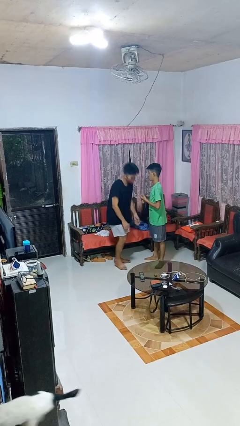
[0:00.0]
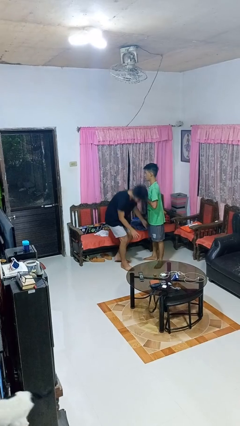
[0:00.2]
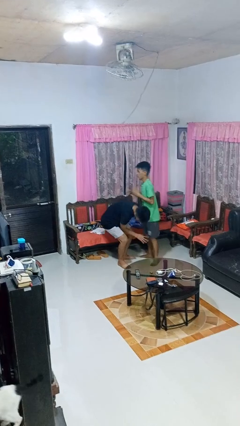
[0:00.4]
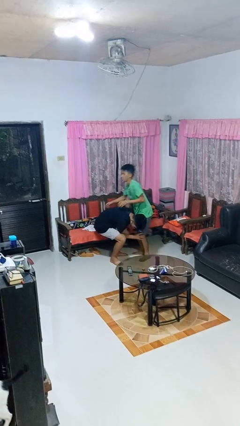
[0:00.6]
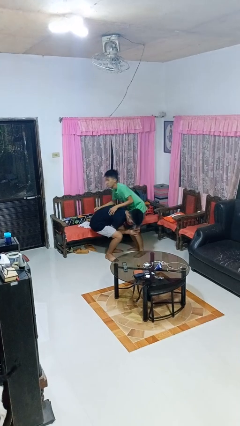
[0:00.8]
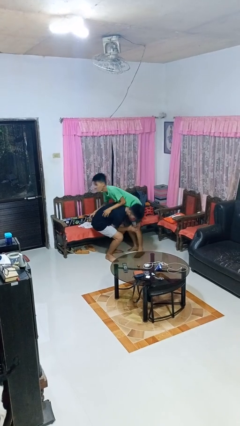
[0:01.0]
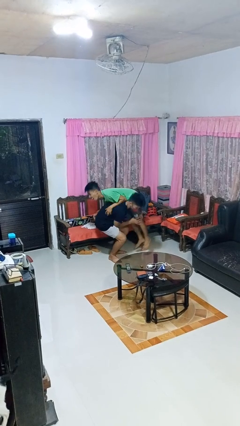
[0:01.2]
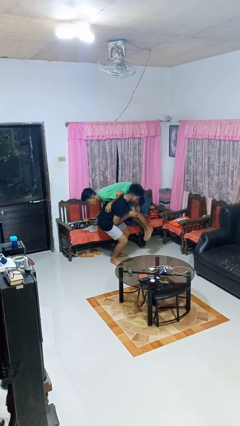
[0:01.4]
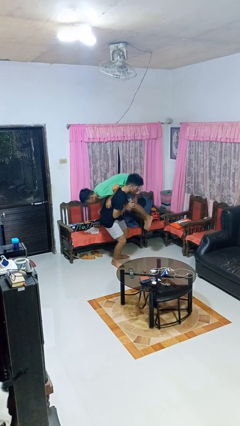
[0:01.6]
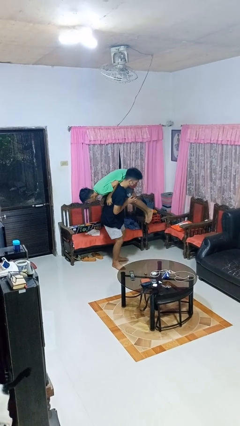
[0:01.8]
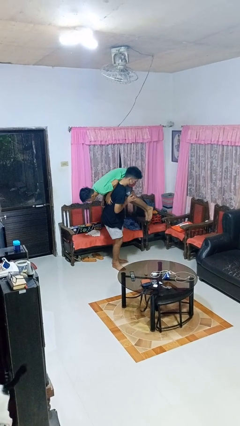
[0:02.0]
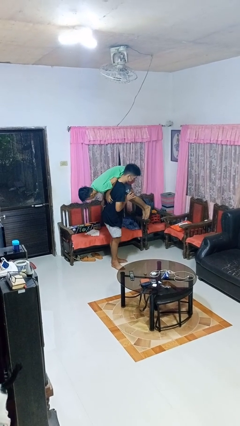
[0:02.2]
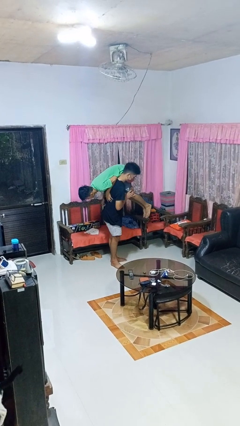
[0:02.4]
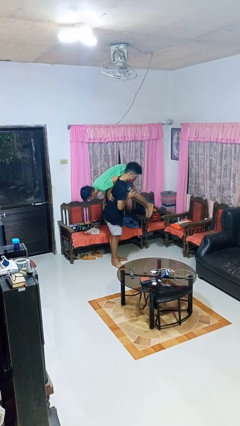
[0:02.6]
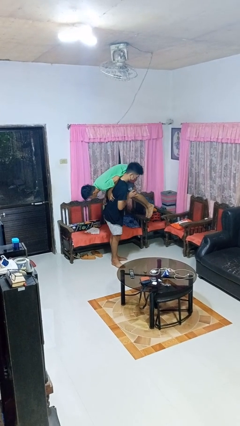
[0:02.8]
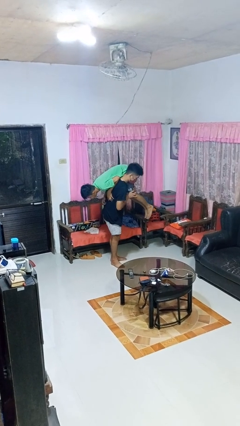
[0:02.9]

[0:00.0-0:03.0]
person carries person over shoulder

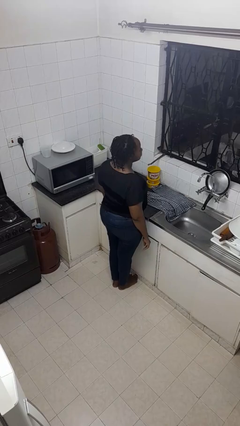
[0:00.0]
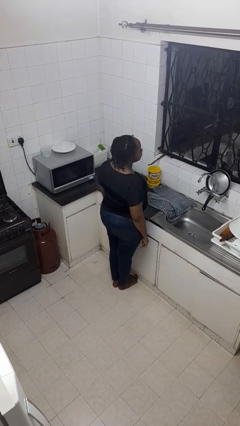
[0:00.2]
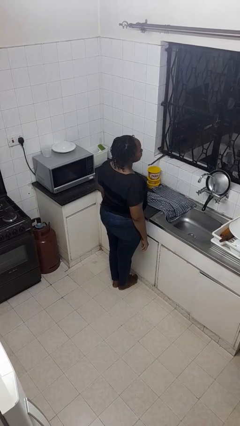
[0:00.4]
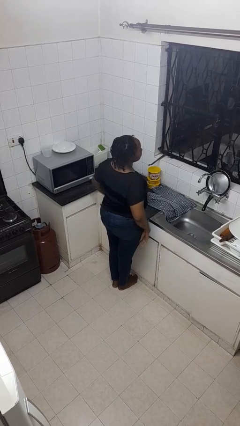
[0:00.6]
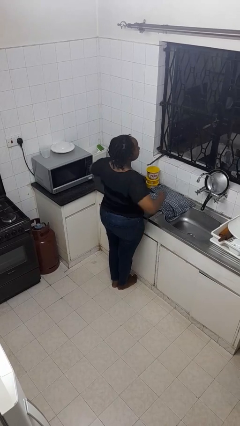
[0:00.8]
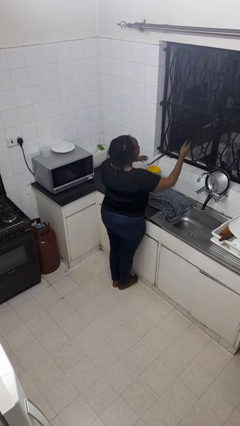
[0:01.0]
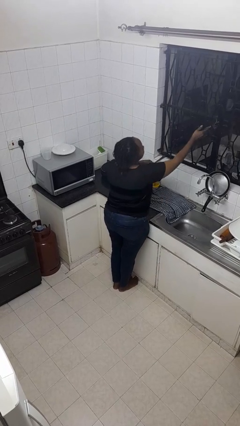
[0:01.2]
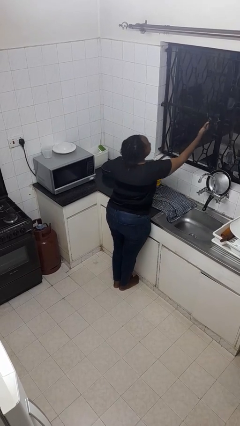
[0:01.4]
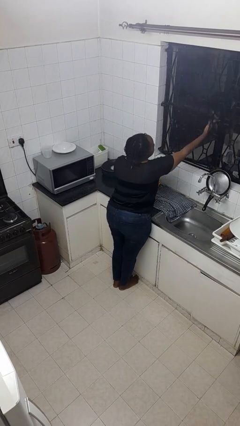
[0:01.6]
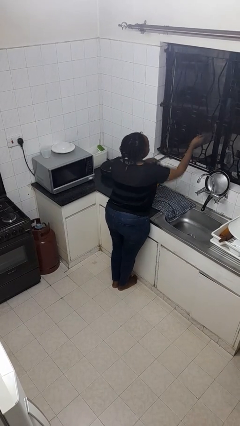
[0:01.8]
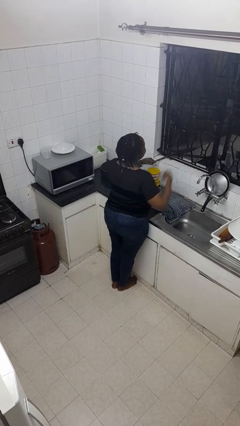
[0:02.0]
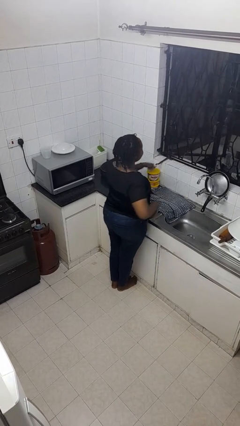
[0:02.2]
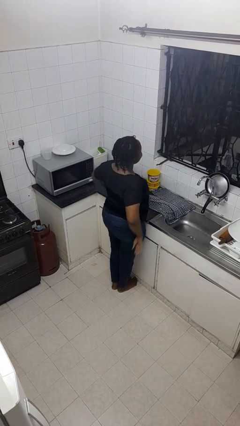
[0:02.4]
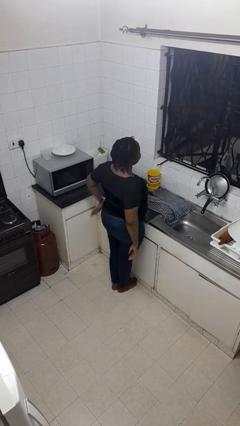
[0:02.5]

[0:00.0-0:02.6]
person opens home window

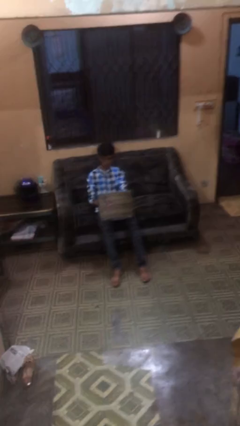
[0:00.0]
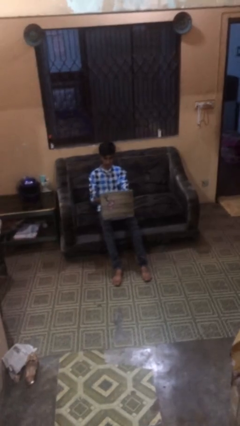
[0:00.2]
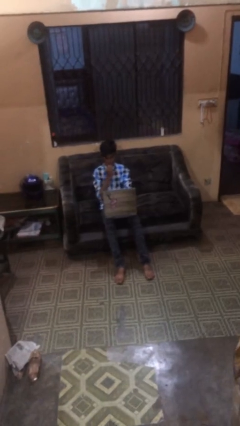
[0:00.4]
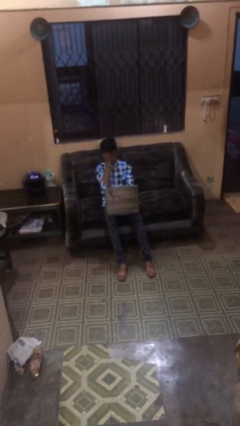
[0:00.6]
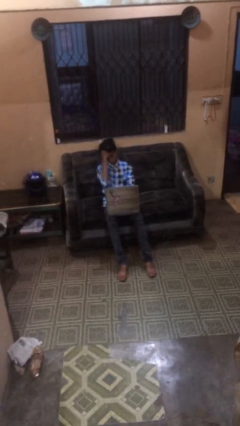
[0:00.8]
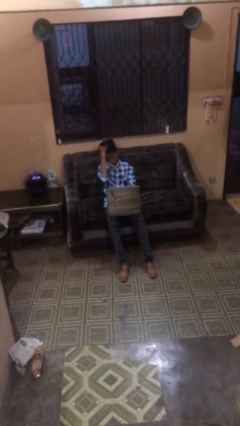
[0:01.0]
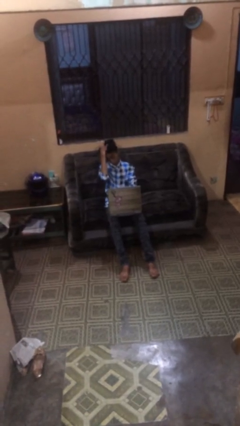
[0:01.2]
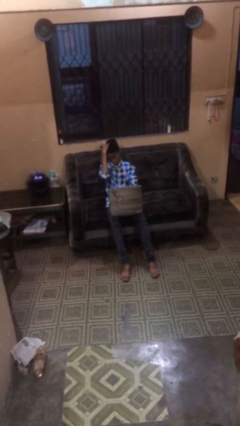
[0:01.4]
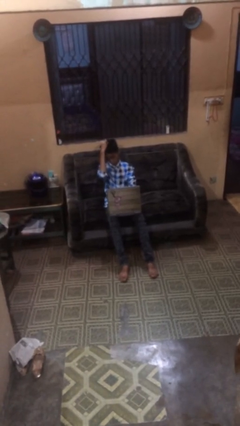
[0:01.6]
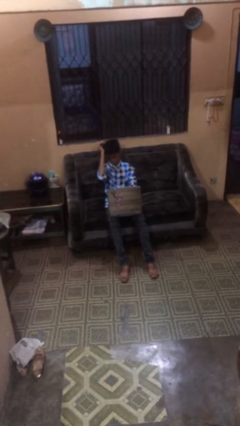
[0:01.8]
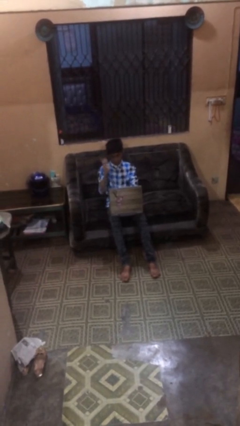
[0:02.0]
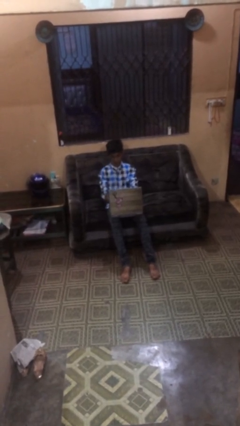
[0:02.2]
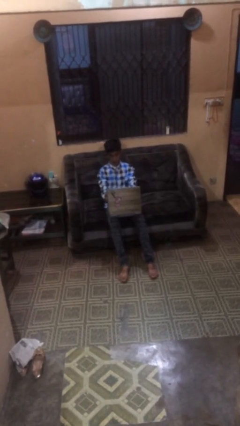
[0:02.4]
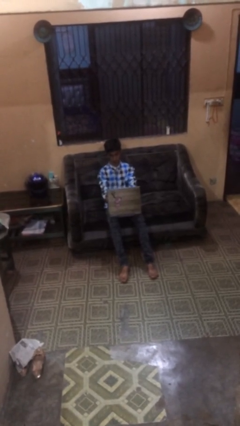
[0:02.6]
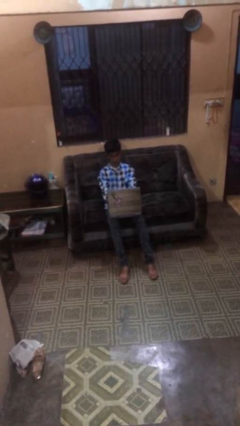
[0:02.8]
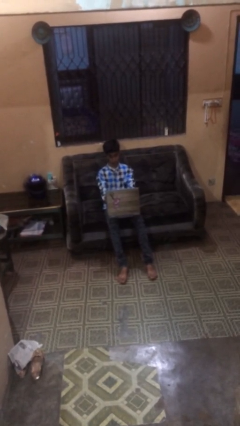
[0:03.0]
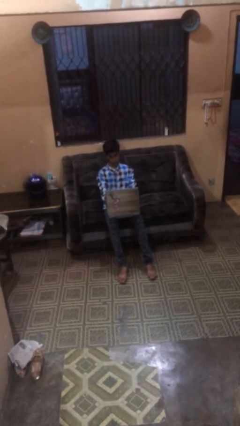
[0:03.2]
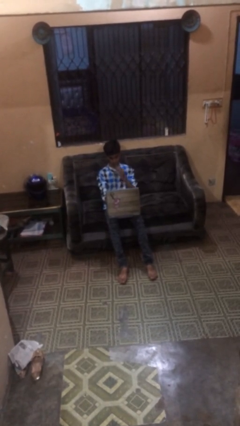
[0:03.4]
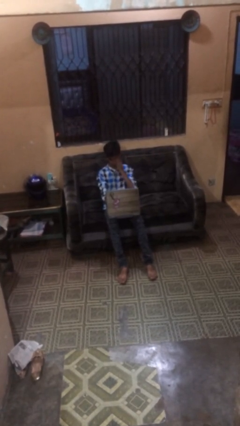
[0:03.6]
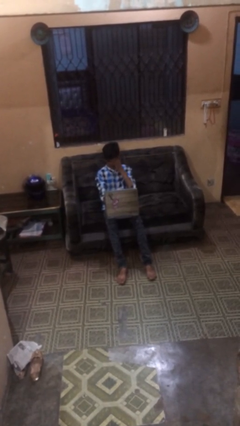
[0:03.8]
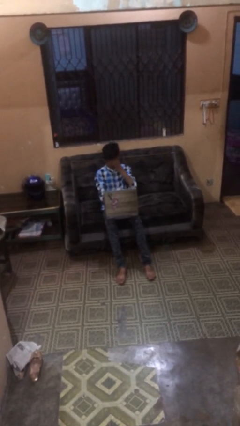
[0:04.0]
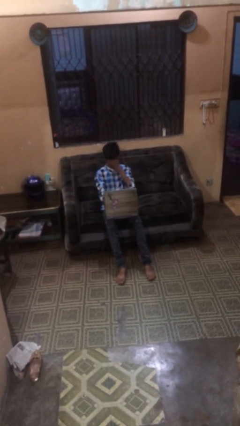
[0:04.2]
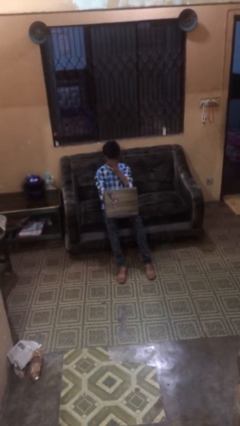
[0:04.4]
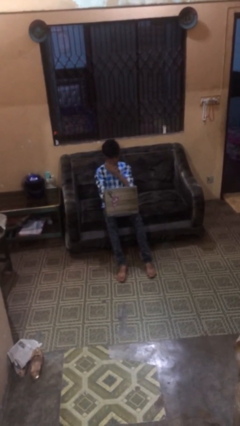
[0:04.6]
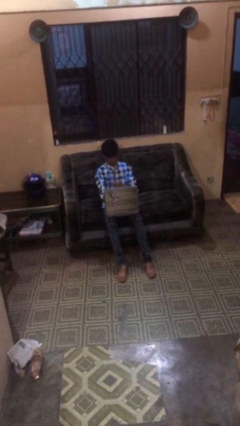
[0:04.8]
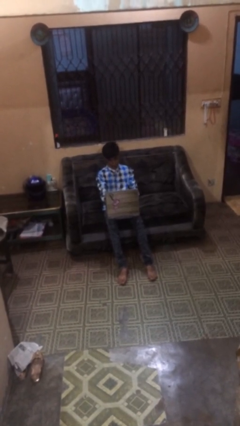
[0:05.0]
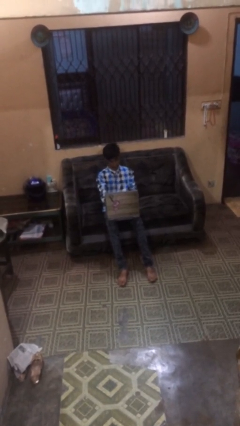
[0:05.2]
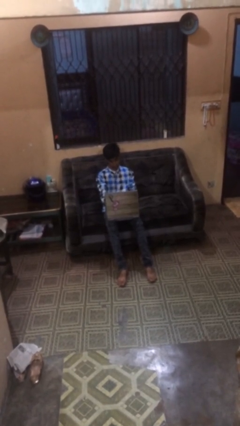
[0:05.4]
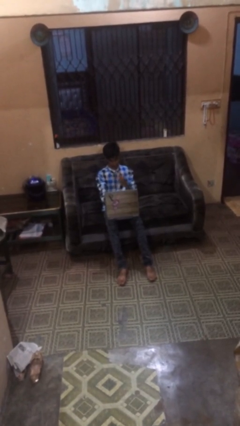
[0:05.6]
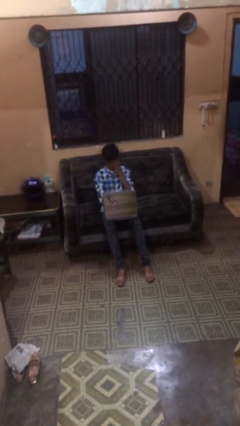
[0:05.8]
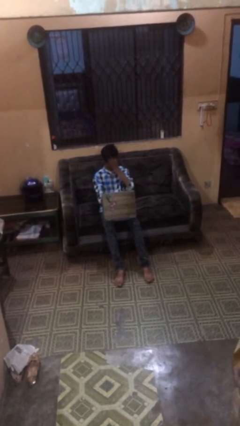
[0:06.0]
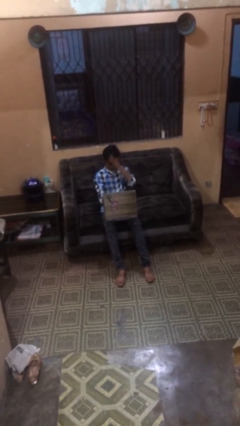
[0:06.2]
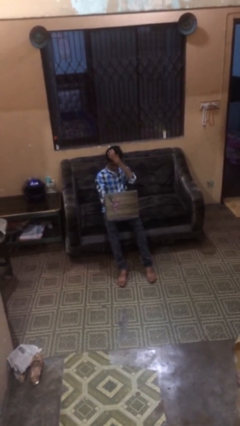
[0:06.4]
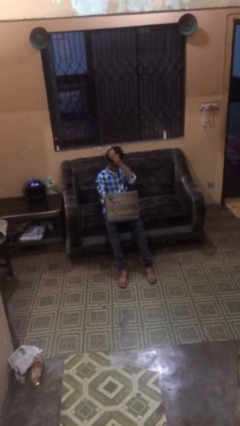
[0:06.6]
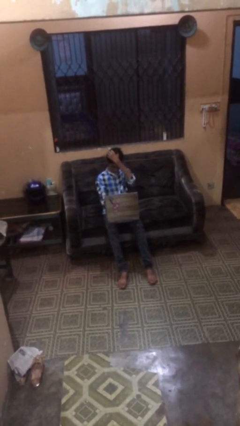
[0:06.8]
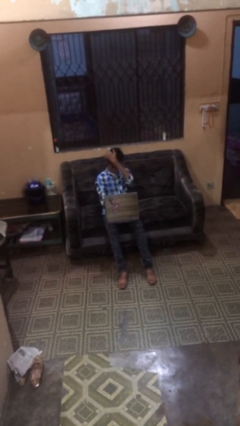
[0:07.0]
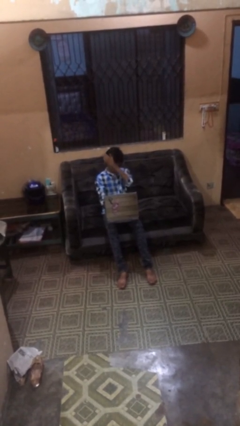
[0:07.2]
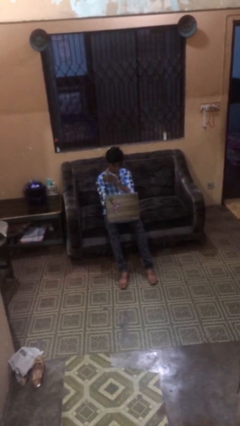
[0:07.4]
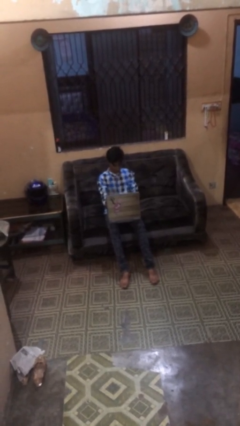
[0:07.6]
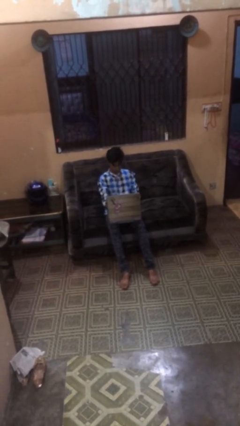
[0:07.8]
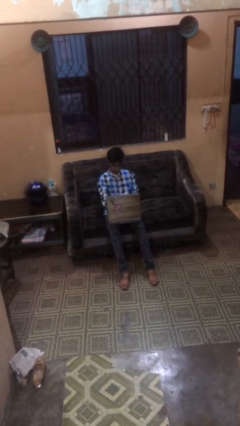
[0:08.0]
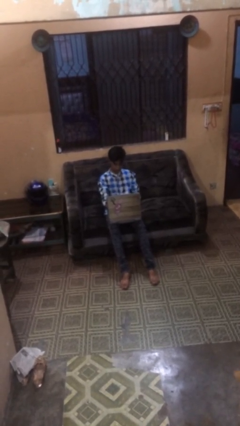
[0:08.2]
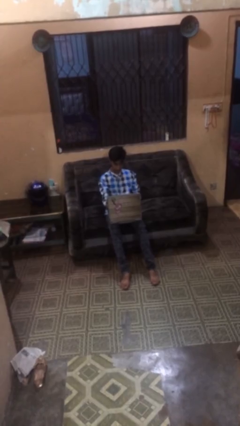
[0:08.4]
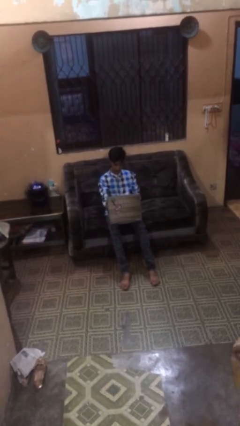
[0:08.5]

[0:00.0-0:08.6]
person interacts with laptop

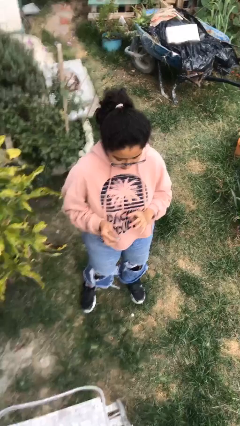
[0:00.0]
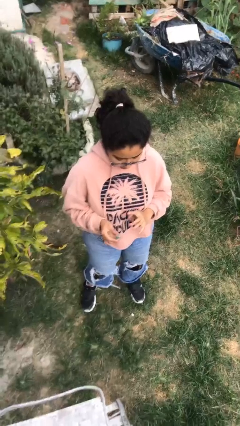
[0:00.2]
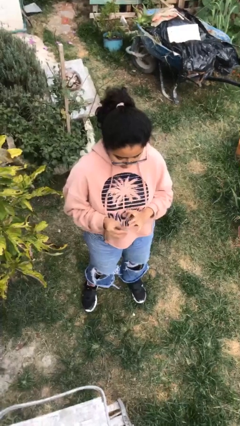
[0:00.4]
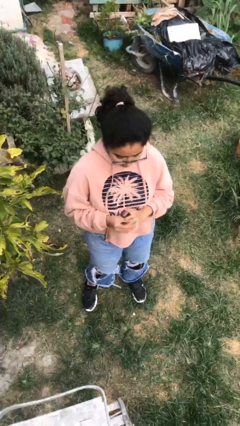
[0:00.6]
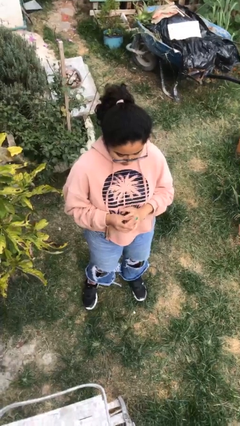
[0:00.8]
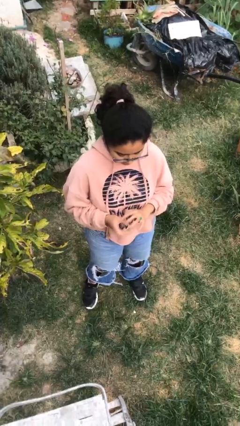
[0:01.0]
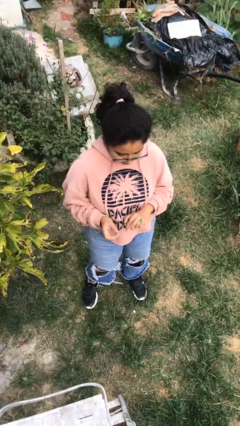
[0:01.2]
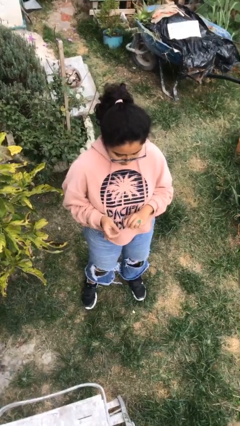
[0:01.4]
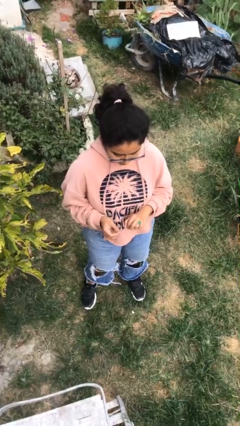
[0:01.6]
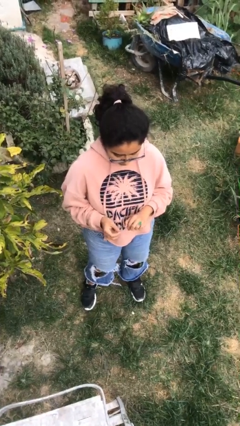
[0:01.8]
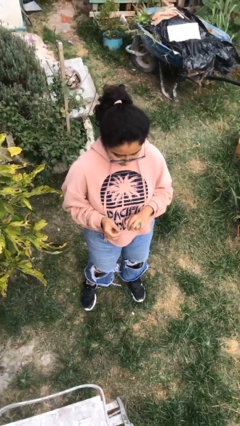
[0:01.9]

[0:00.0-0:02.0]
person puts on ring

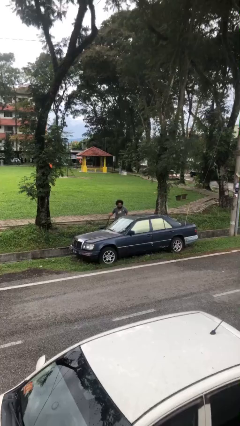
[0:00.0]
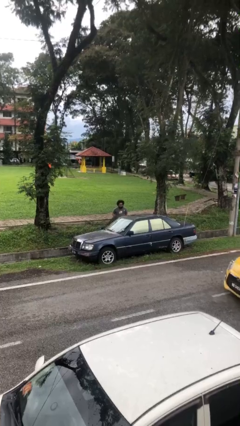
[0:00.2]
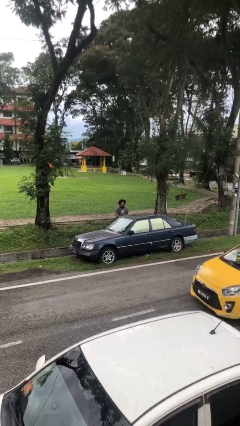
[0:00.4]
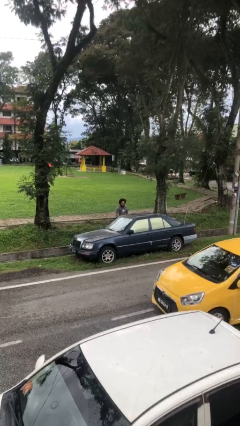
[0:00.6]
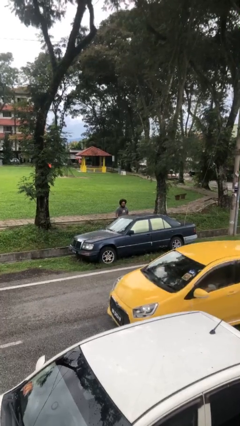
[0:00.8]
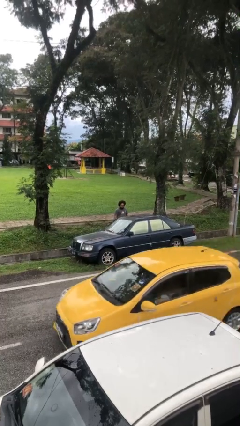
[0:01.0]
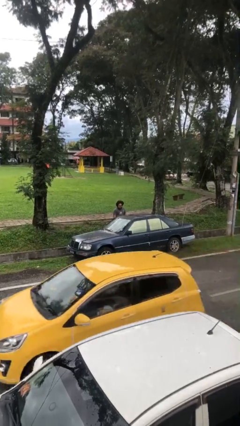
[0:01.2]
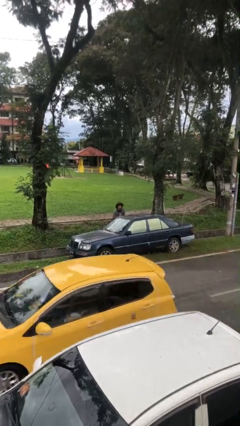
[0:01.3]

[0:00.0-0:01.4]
person closes car door
